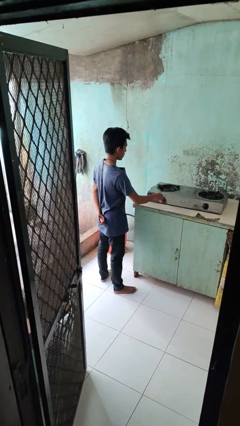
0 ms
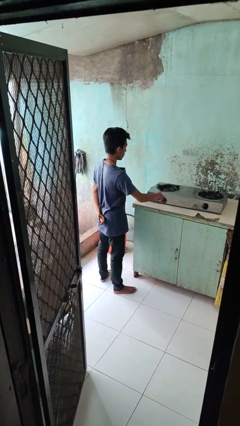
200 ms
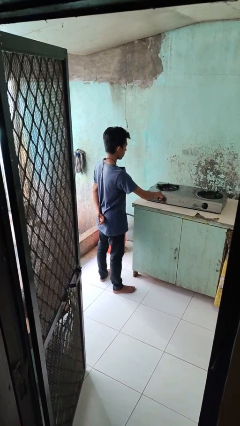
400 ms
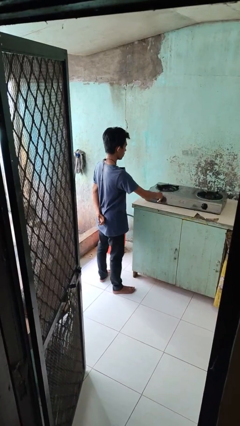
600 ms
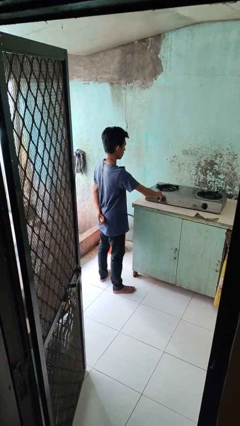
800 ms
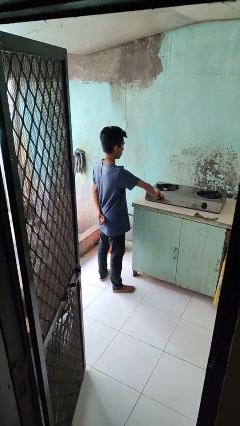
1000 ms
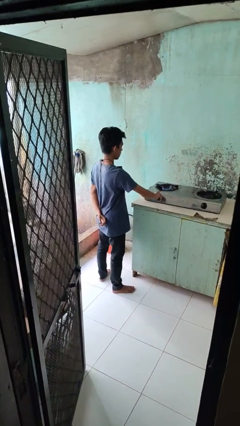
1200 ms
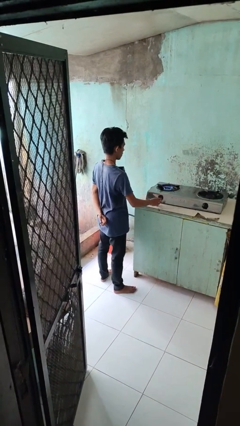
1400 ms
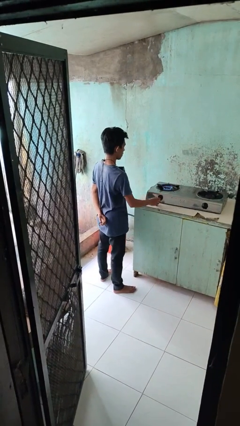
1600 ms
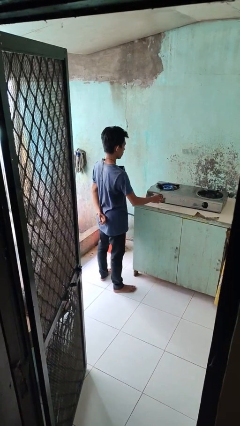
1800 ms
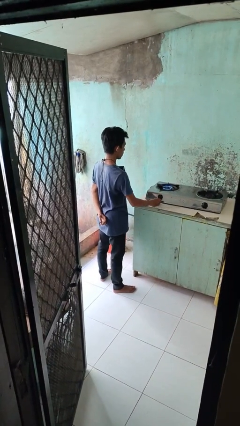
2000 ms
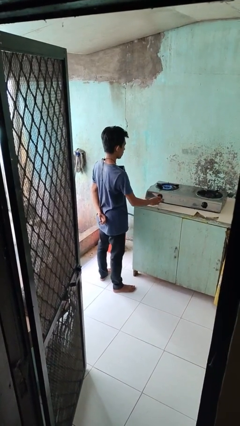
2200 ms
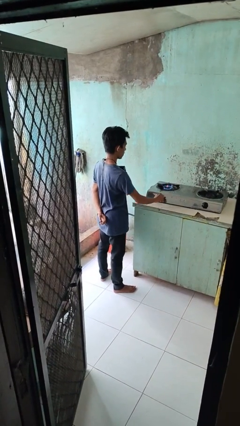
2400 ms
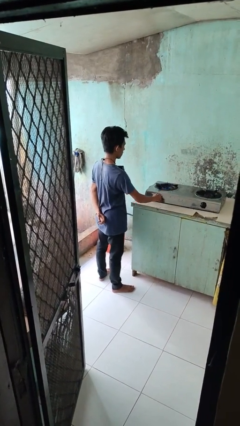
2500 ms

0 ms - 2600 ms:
person turns on stovetop

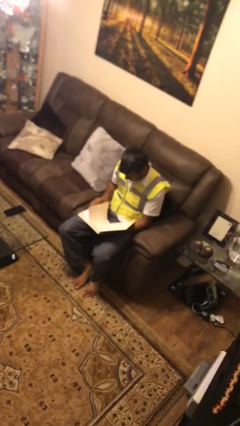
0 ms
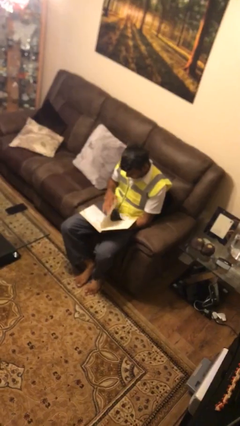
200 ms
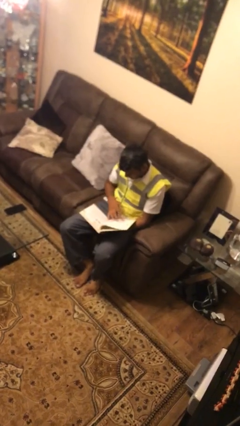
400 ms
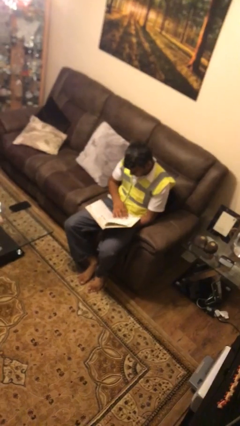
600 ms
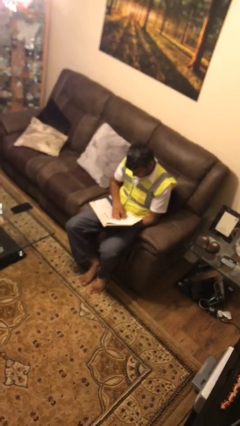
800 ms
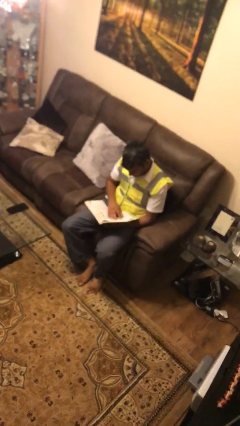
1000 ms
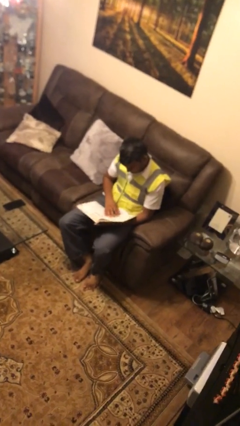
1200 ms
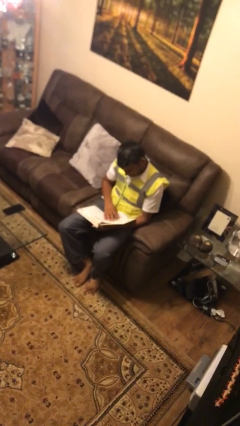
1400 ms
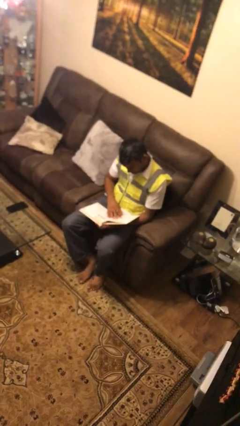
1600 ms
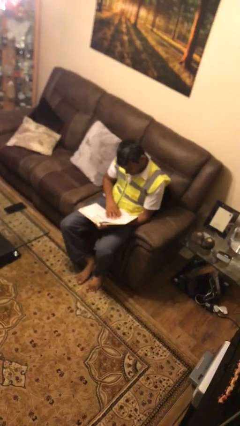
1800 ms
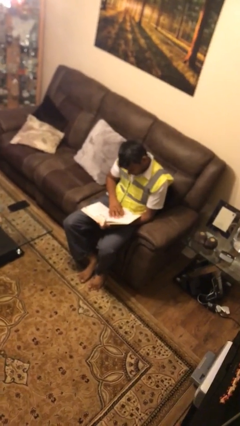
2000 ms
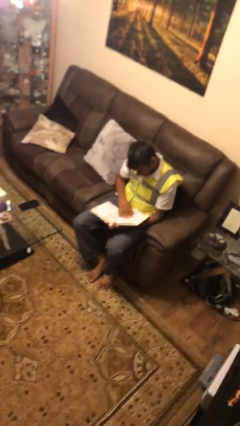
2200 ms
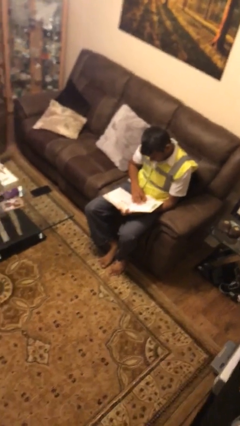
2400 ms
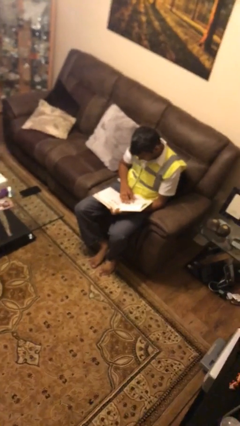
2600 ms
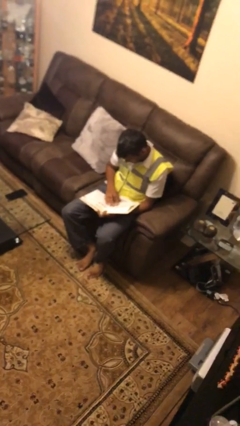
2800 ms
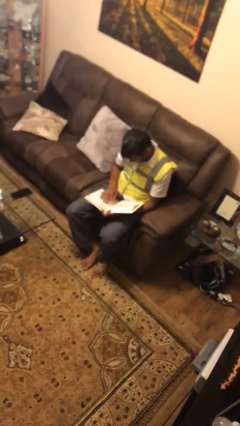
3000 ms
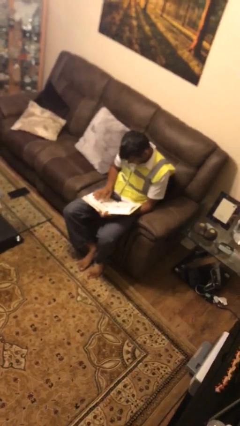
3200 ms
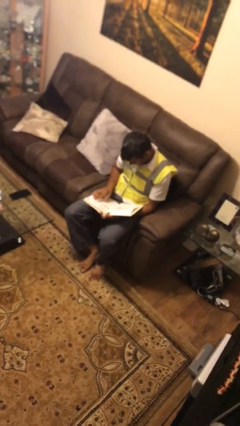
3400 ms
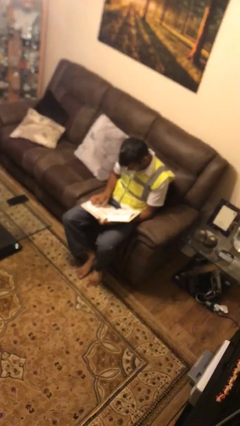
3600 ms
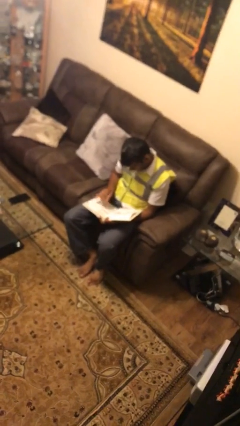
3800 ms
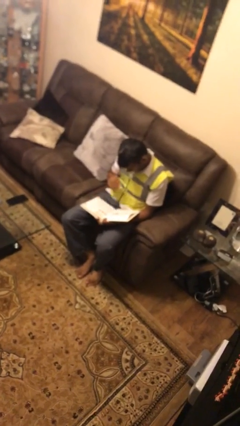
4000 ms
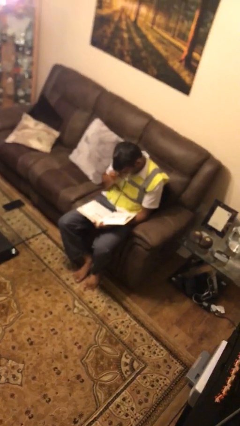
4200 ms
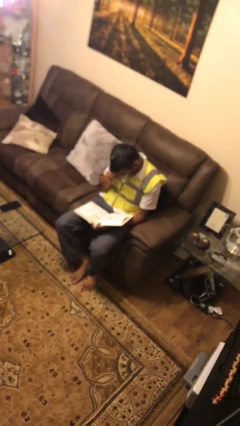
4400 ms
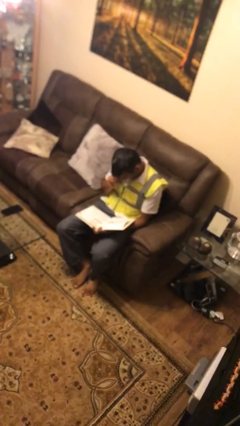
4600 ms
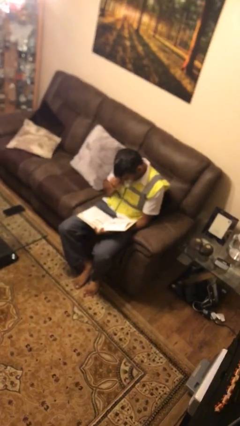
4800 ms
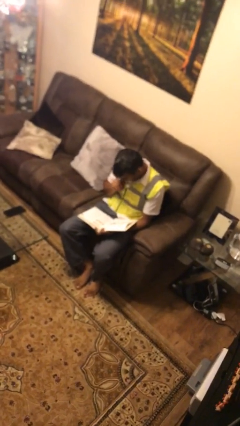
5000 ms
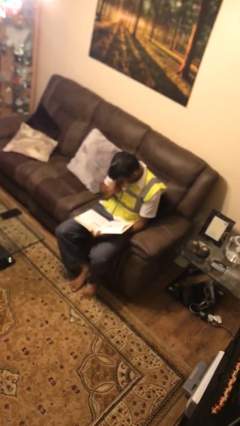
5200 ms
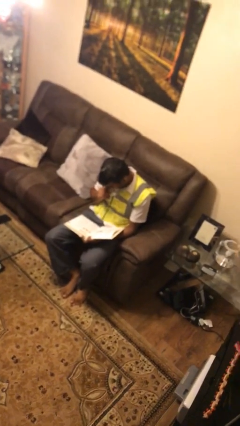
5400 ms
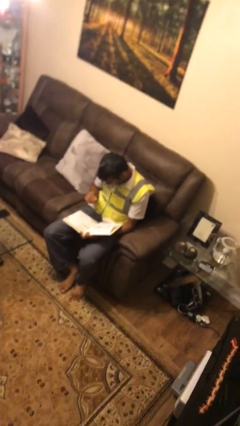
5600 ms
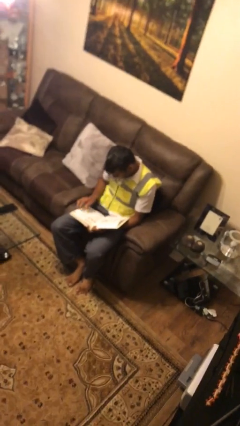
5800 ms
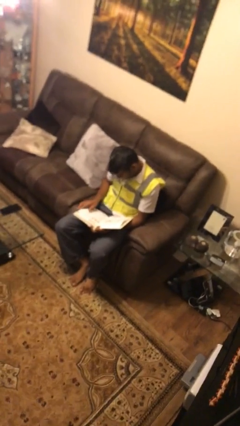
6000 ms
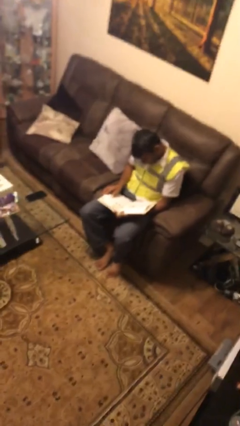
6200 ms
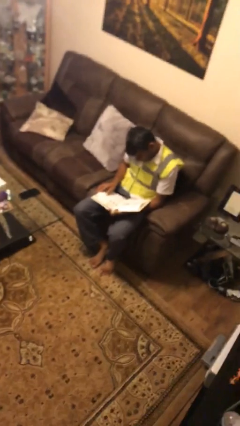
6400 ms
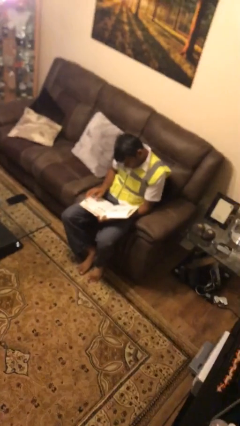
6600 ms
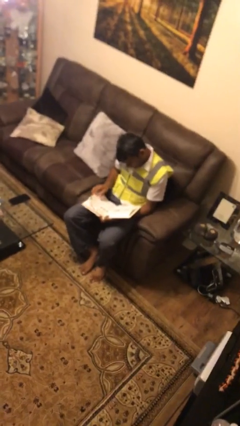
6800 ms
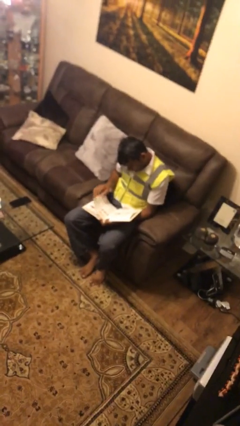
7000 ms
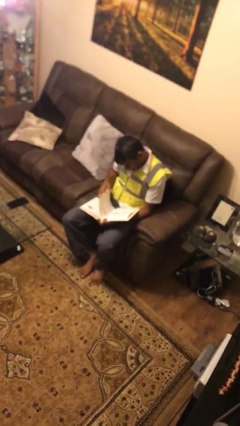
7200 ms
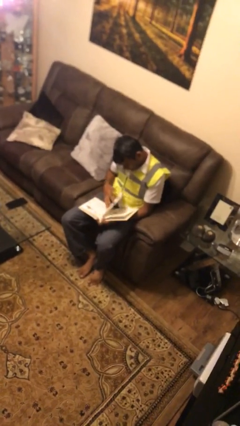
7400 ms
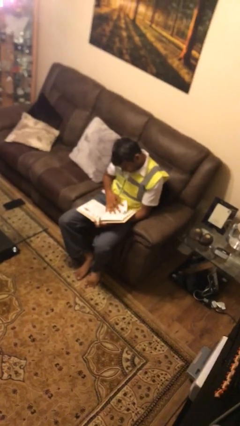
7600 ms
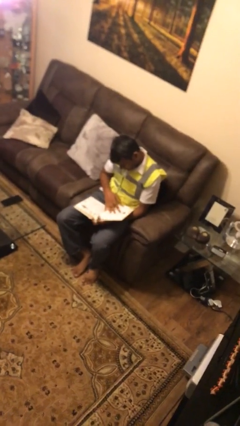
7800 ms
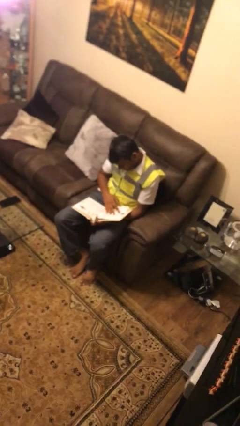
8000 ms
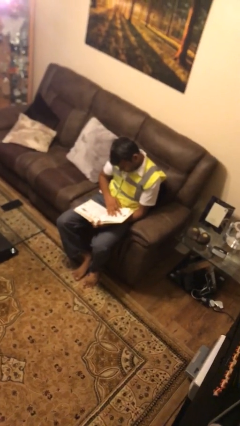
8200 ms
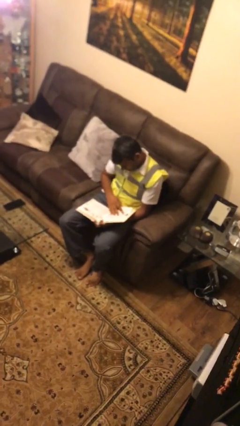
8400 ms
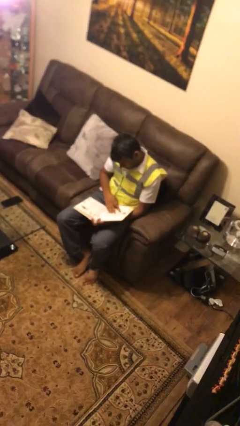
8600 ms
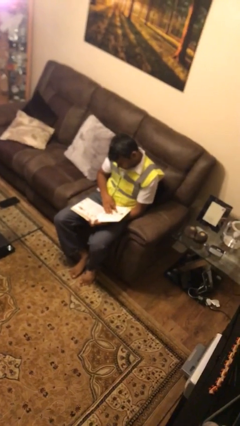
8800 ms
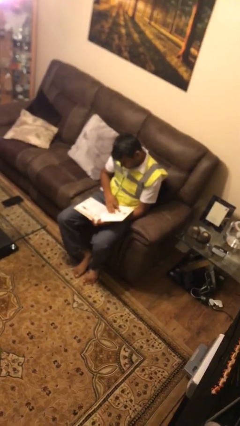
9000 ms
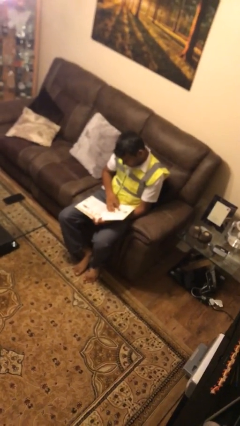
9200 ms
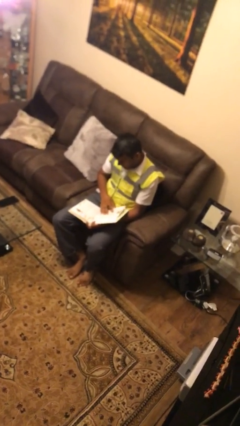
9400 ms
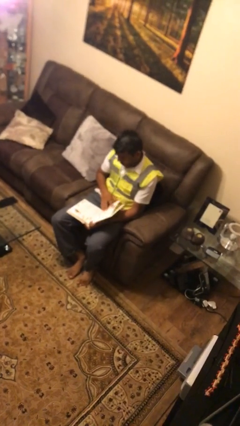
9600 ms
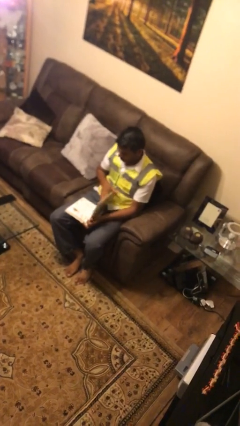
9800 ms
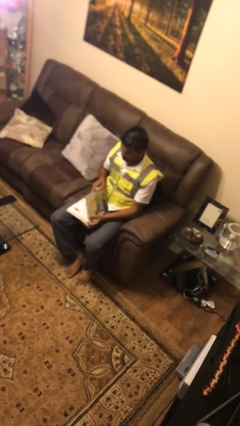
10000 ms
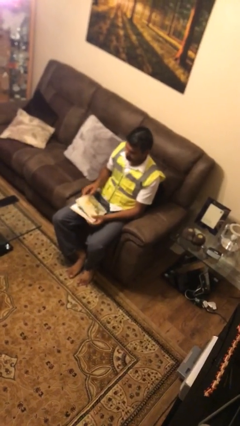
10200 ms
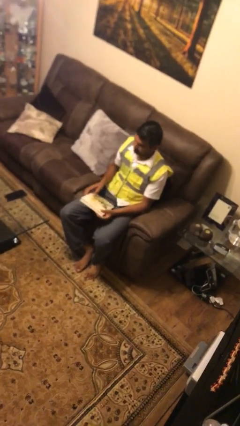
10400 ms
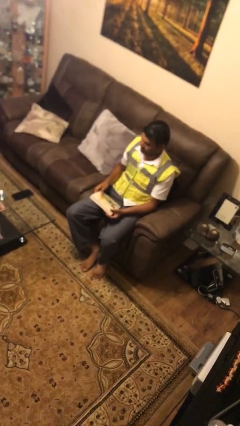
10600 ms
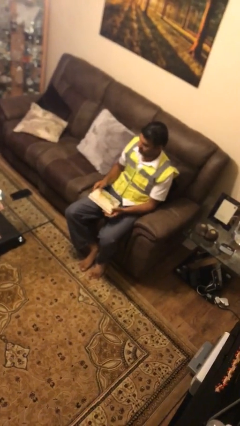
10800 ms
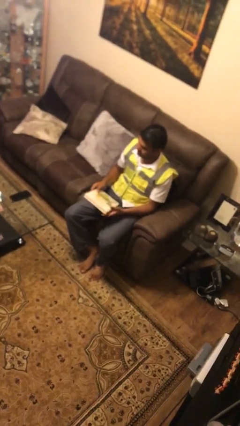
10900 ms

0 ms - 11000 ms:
person reads document

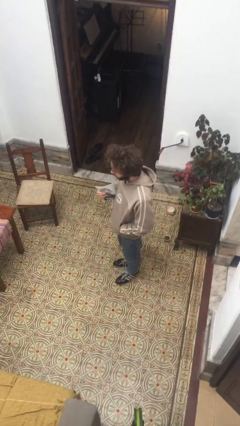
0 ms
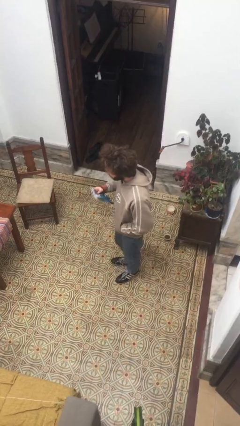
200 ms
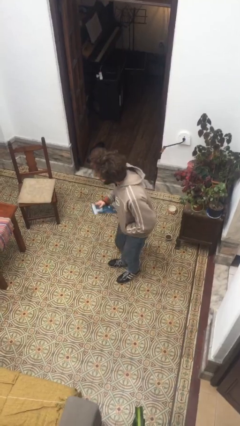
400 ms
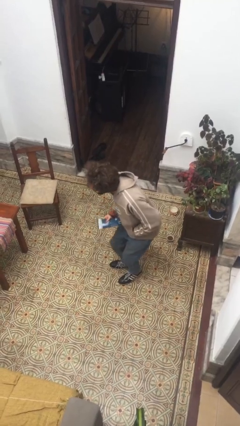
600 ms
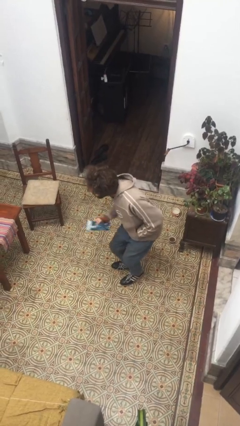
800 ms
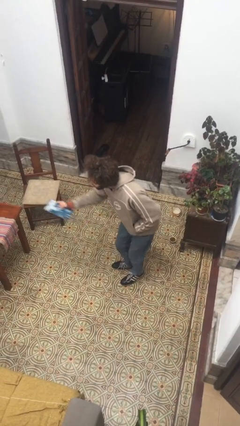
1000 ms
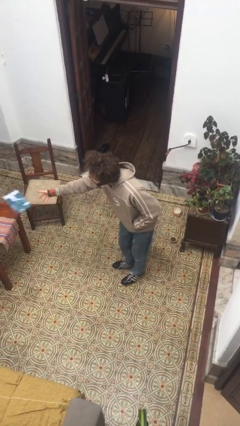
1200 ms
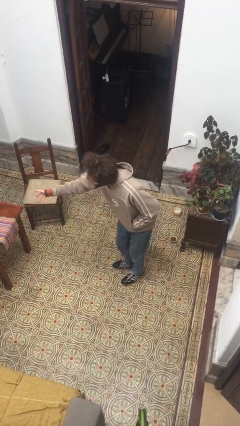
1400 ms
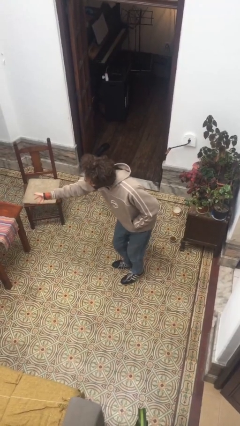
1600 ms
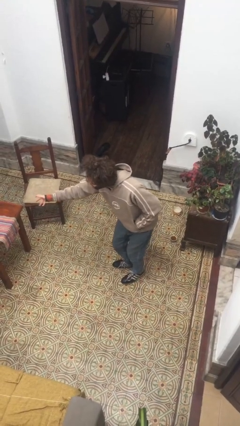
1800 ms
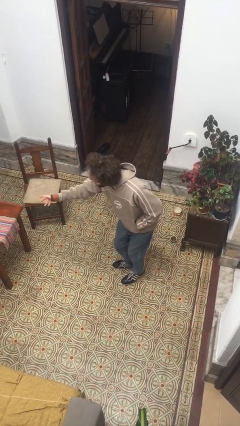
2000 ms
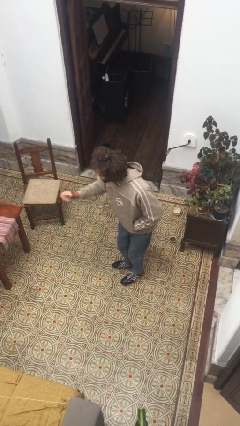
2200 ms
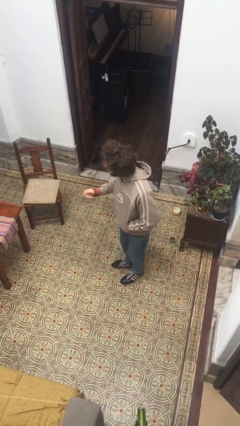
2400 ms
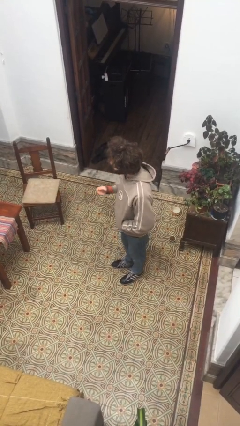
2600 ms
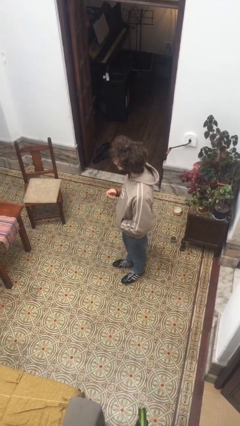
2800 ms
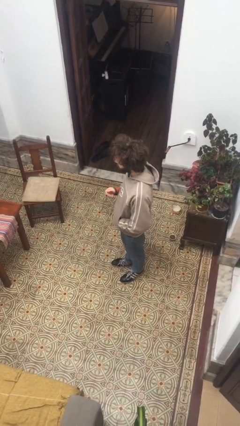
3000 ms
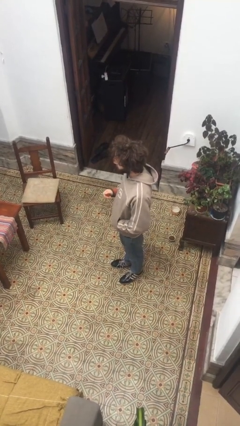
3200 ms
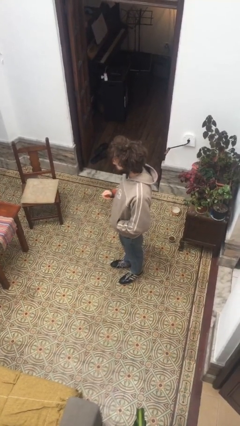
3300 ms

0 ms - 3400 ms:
person throws object on bed

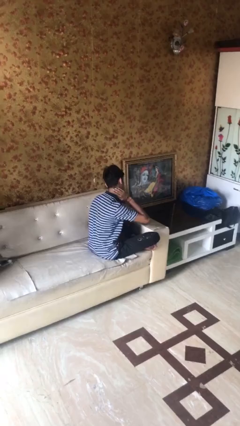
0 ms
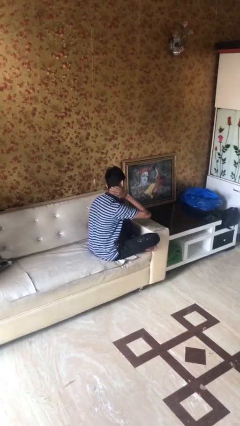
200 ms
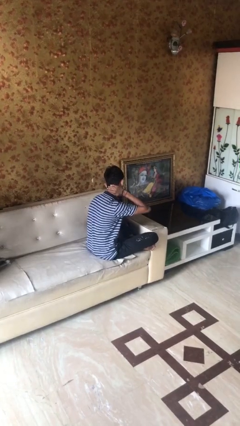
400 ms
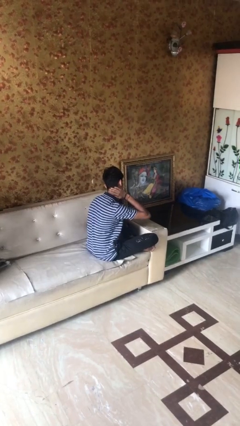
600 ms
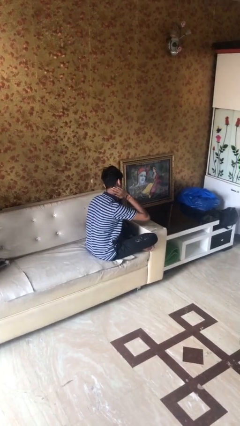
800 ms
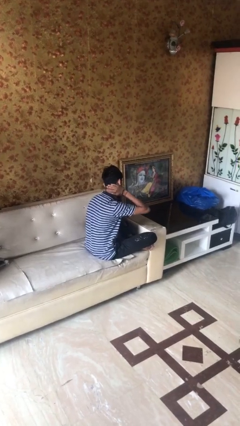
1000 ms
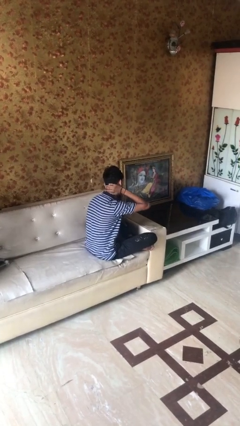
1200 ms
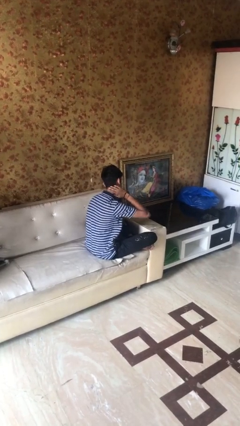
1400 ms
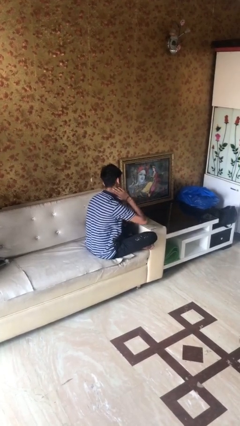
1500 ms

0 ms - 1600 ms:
person rubs neck
